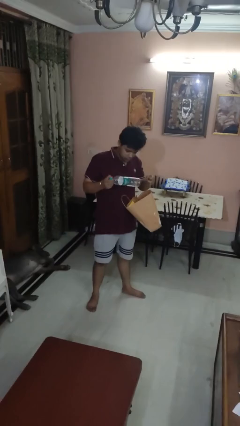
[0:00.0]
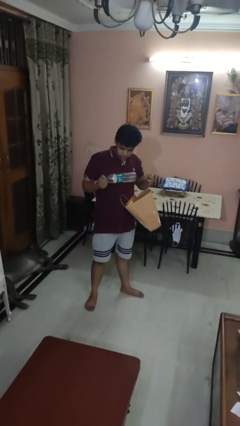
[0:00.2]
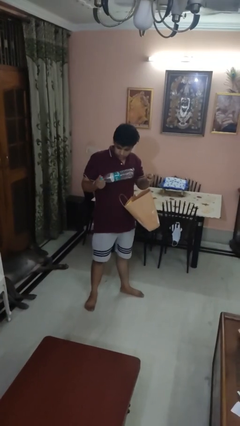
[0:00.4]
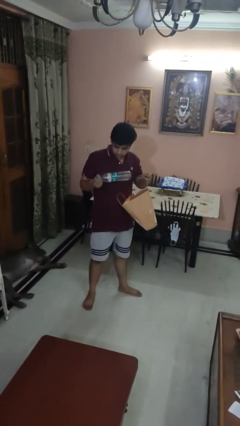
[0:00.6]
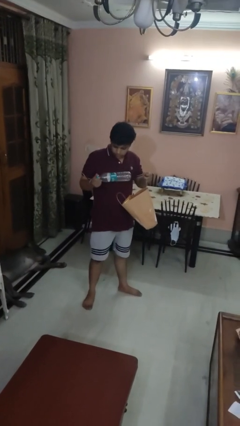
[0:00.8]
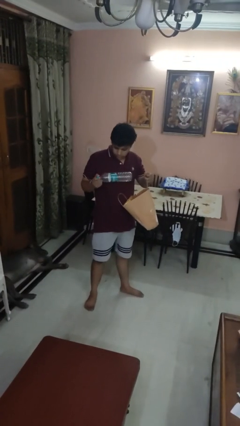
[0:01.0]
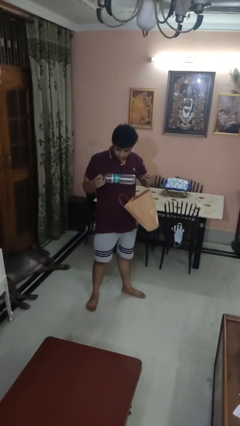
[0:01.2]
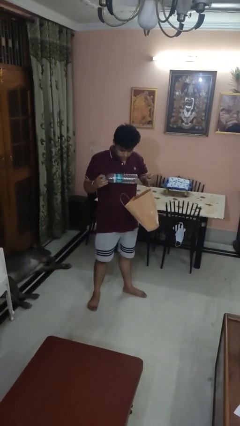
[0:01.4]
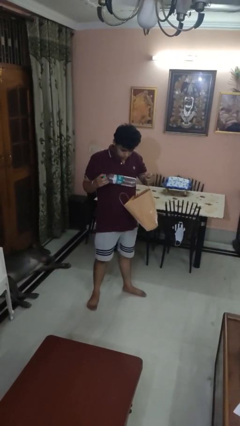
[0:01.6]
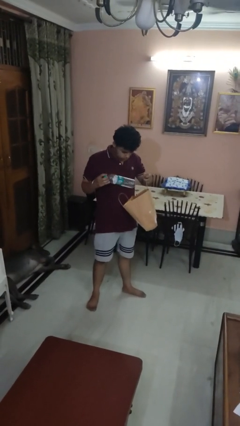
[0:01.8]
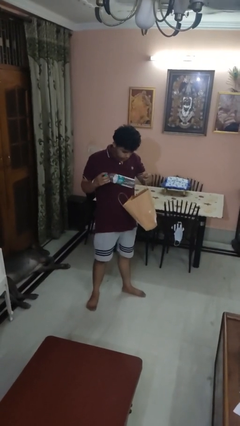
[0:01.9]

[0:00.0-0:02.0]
person takes object from bag

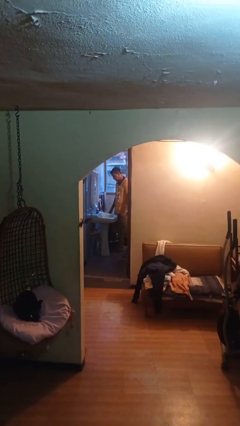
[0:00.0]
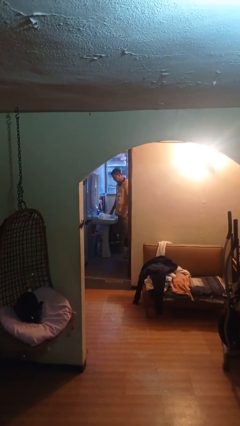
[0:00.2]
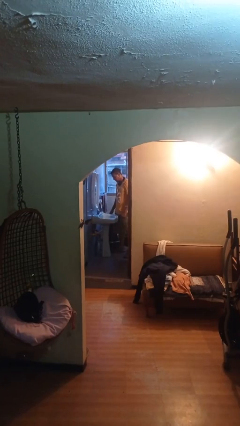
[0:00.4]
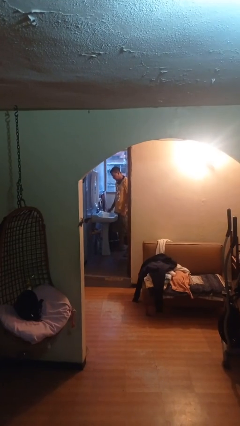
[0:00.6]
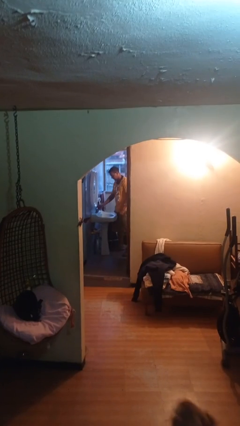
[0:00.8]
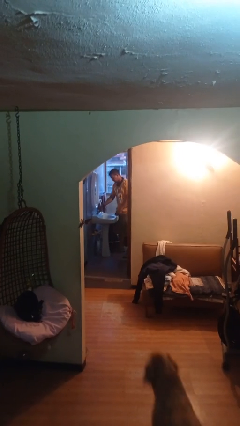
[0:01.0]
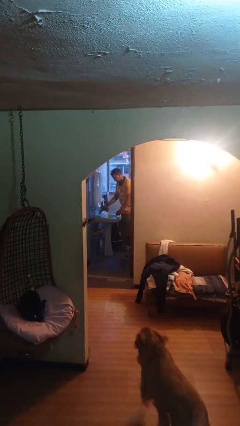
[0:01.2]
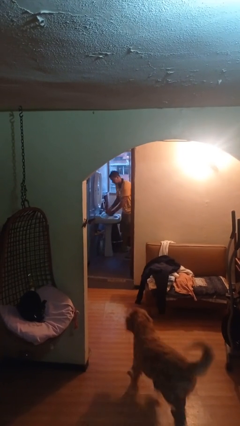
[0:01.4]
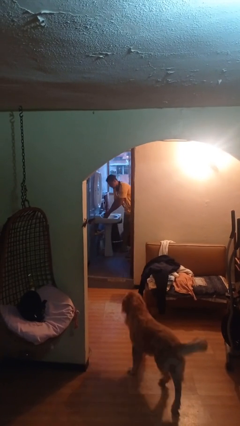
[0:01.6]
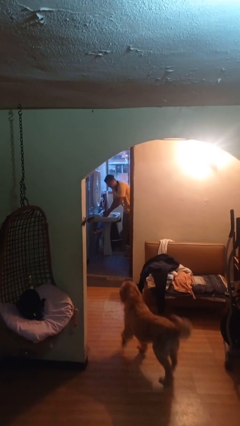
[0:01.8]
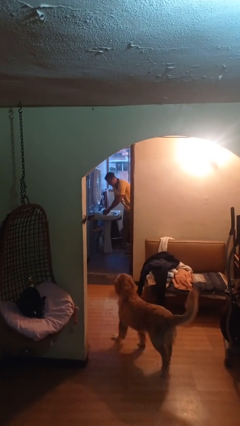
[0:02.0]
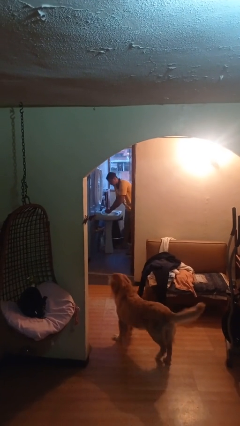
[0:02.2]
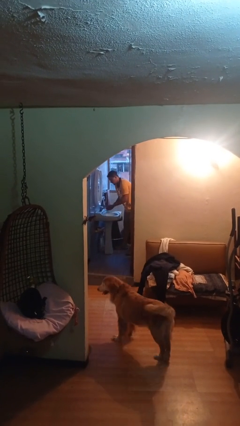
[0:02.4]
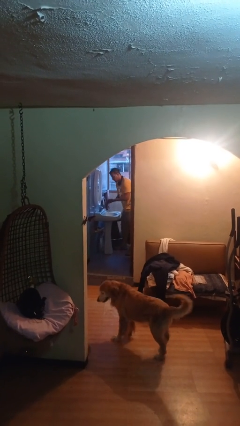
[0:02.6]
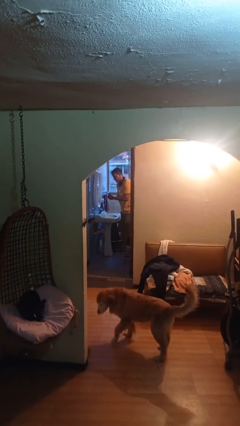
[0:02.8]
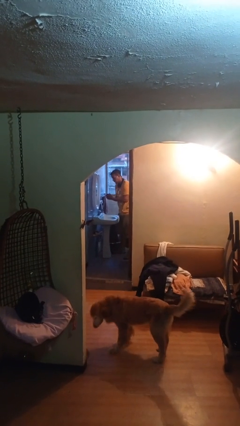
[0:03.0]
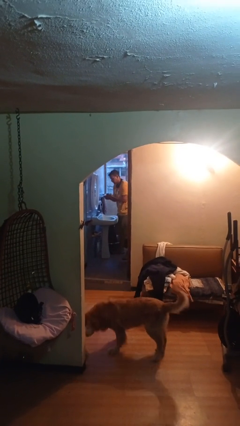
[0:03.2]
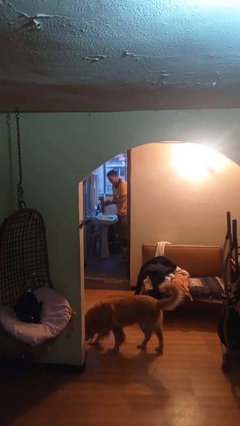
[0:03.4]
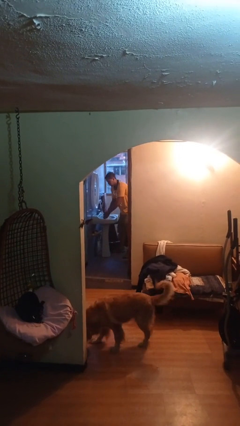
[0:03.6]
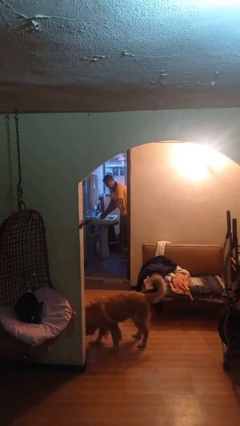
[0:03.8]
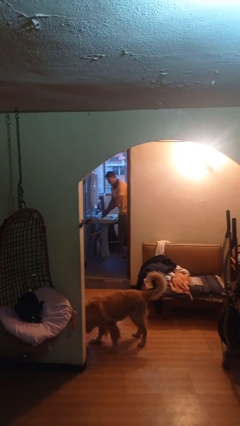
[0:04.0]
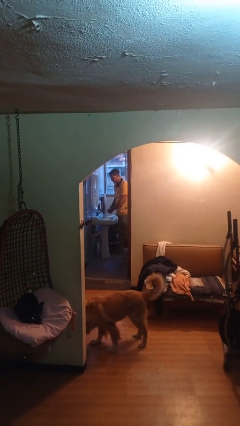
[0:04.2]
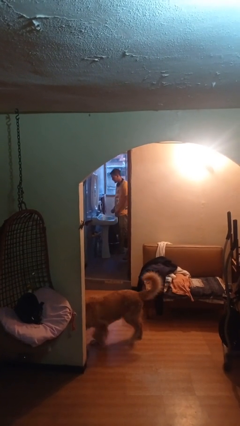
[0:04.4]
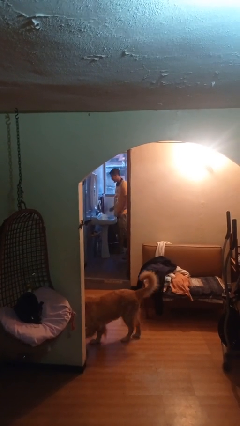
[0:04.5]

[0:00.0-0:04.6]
person washes hands

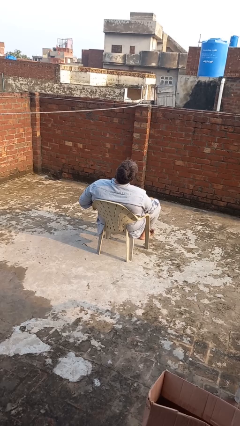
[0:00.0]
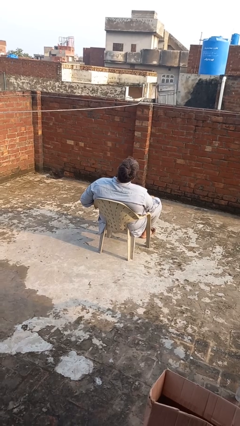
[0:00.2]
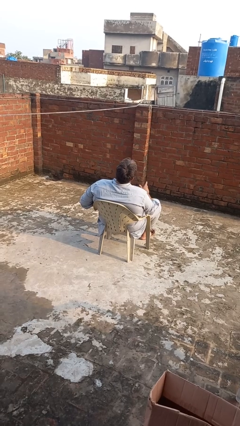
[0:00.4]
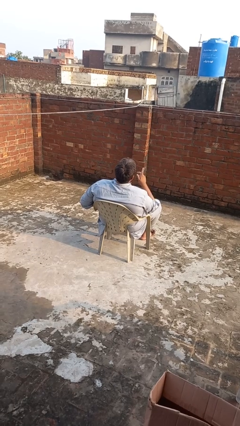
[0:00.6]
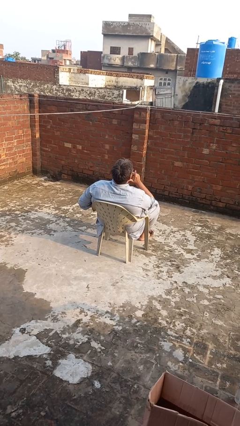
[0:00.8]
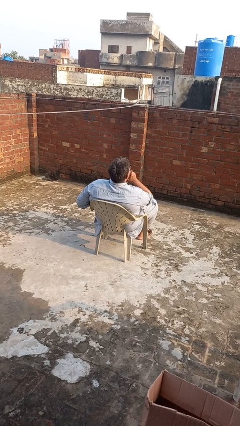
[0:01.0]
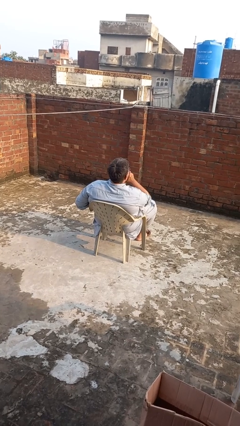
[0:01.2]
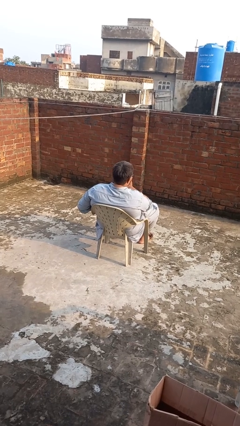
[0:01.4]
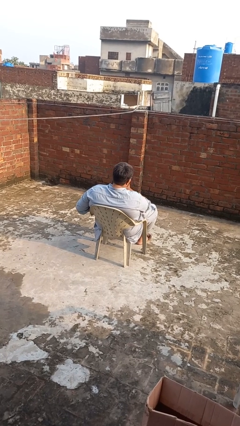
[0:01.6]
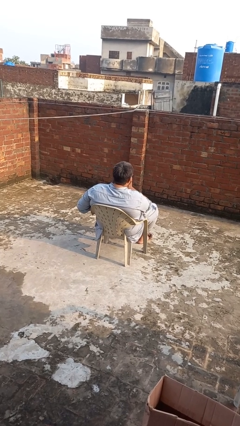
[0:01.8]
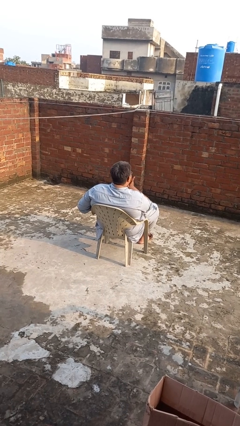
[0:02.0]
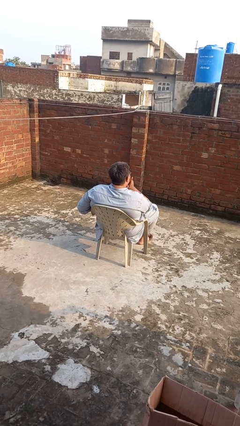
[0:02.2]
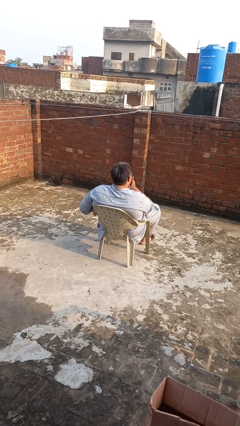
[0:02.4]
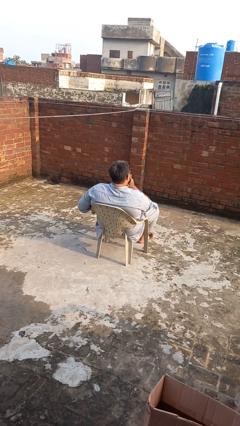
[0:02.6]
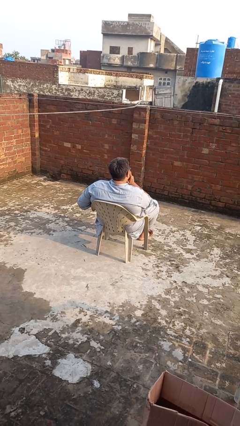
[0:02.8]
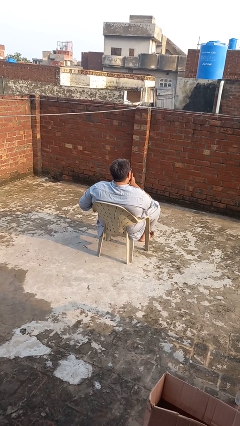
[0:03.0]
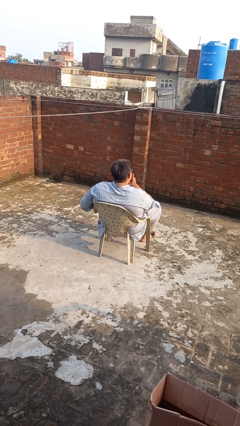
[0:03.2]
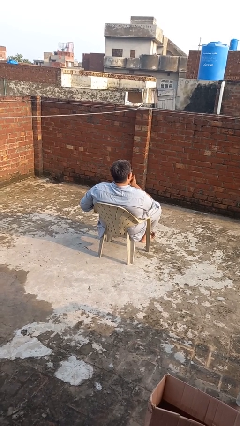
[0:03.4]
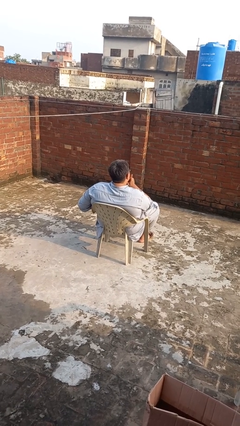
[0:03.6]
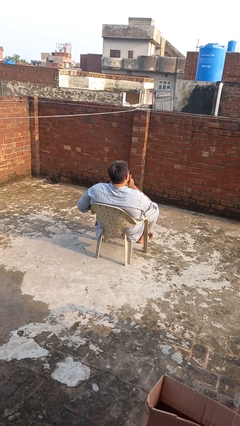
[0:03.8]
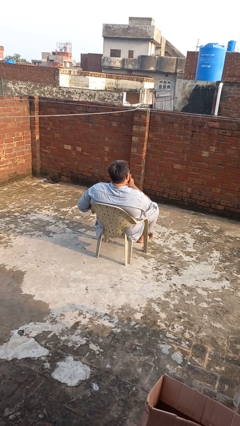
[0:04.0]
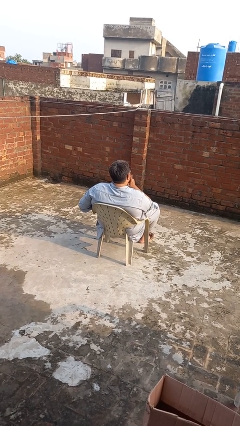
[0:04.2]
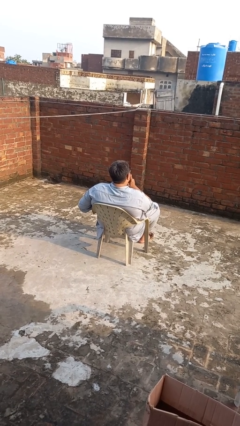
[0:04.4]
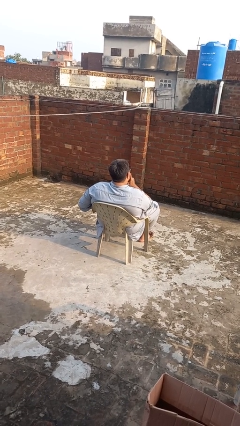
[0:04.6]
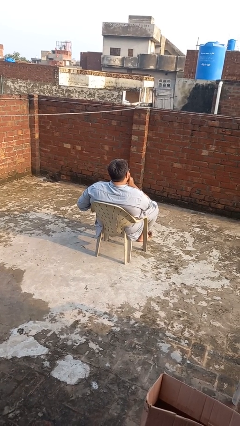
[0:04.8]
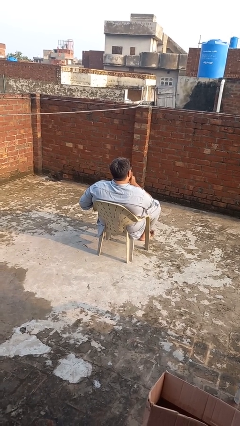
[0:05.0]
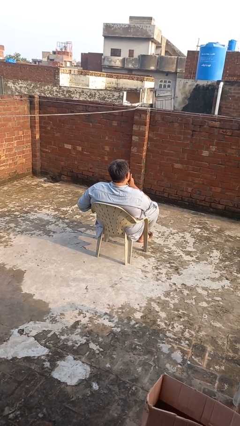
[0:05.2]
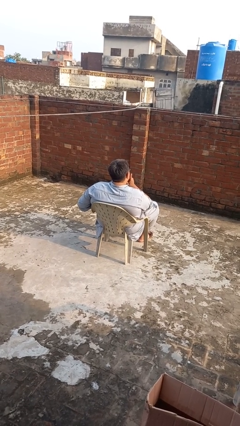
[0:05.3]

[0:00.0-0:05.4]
person strokes chin

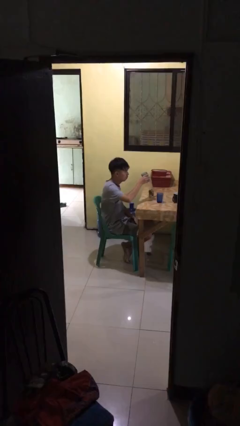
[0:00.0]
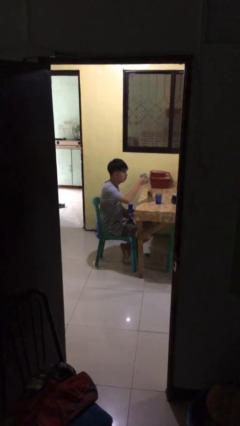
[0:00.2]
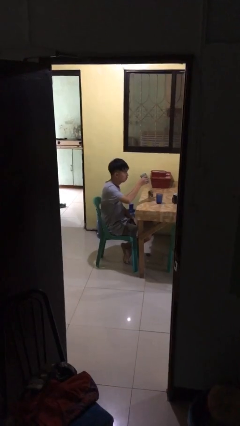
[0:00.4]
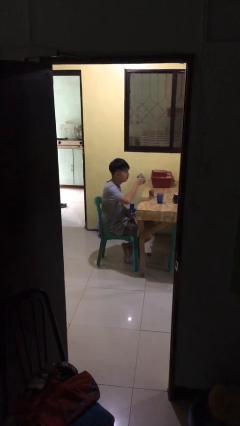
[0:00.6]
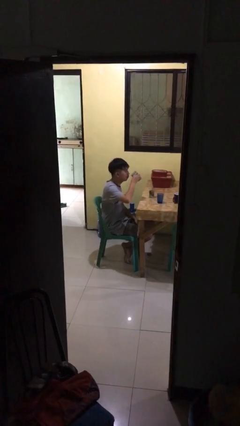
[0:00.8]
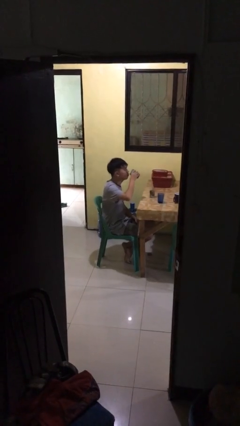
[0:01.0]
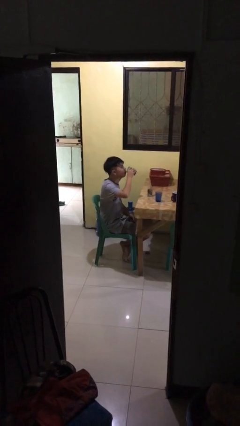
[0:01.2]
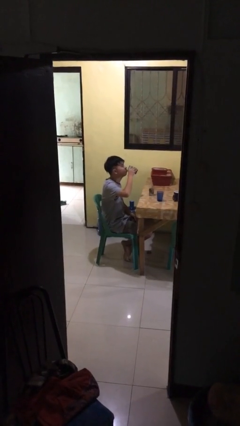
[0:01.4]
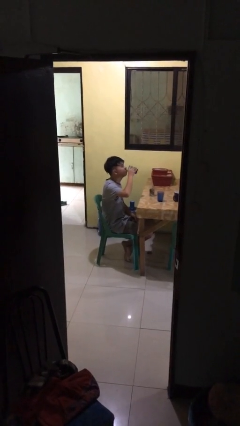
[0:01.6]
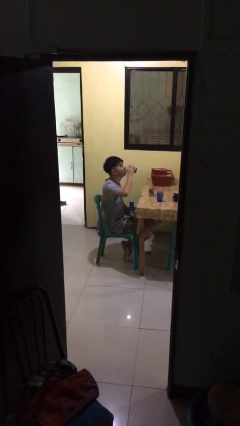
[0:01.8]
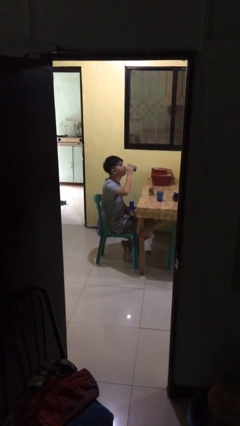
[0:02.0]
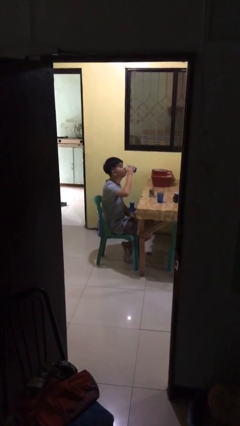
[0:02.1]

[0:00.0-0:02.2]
person drinks from shotglass

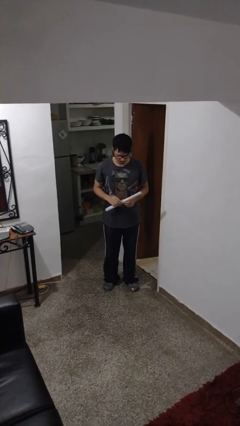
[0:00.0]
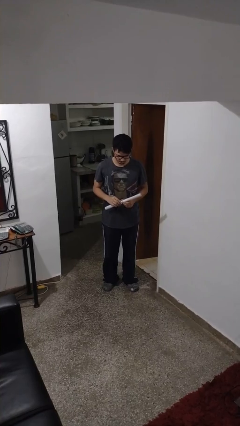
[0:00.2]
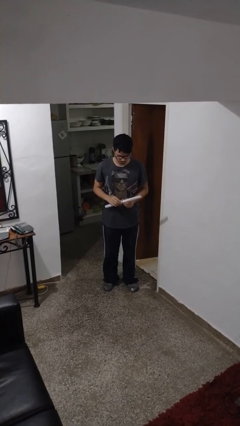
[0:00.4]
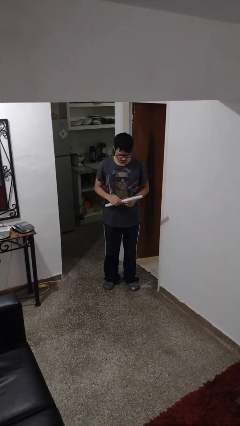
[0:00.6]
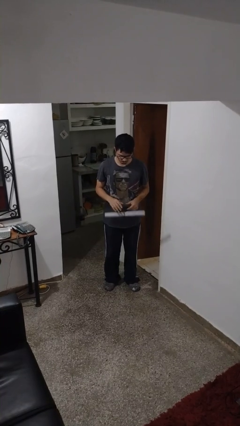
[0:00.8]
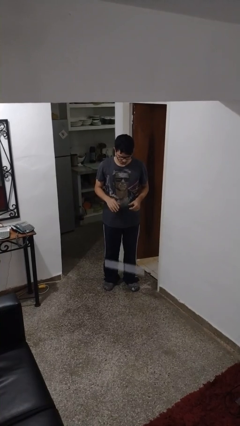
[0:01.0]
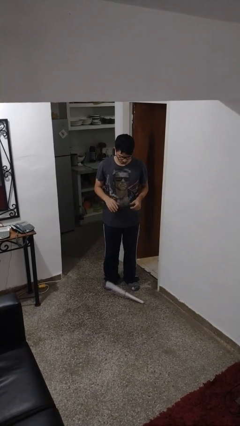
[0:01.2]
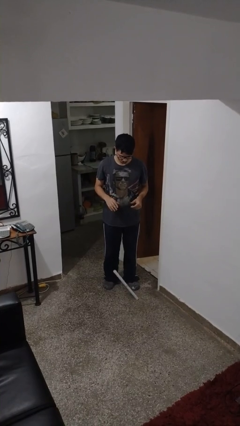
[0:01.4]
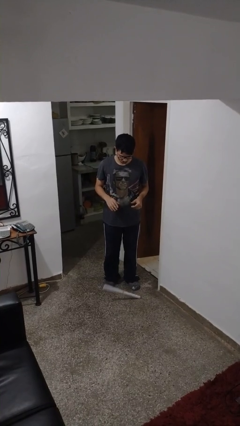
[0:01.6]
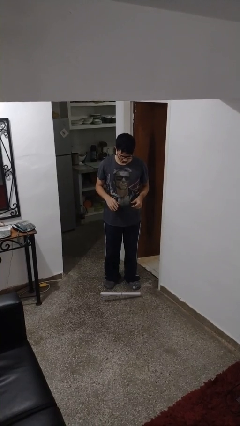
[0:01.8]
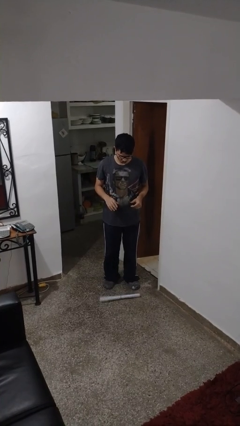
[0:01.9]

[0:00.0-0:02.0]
person drops object

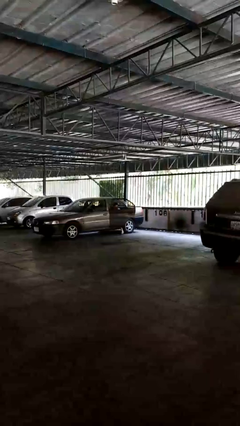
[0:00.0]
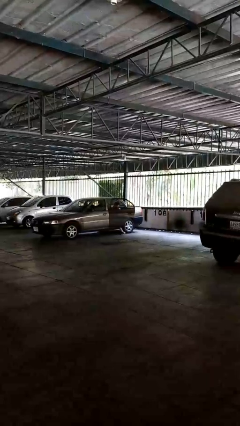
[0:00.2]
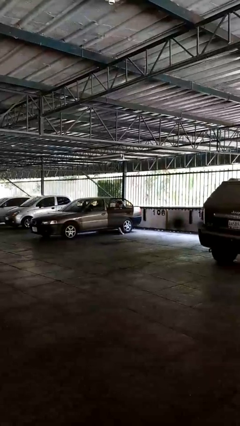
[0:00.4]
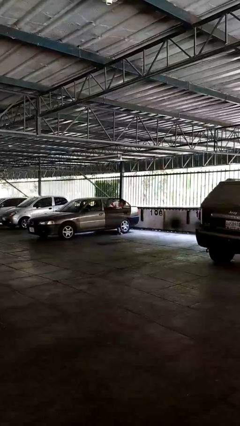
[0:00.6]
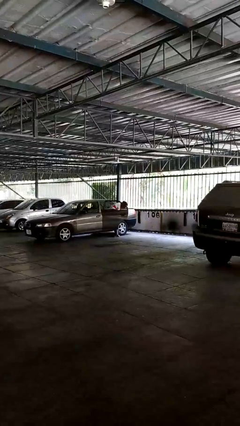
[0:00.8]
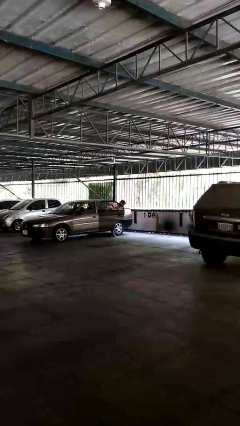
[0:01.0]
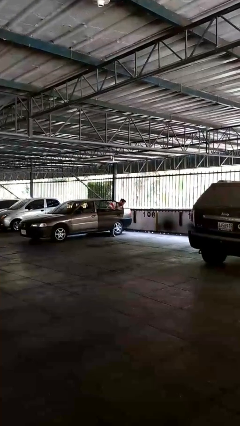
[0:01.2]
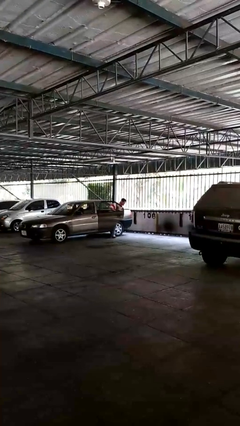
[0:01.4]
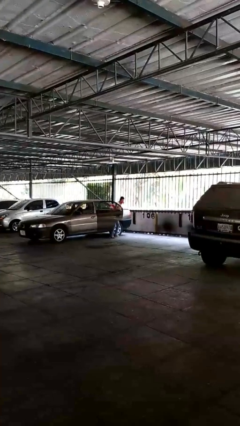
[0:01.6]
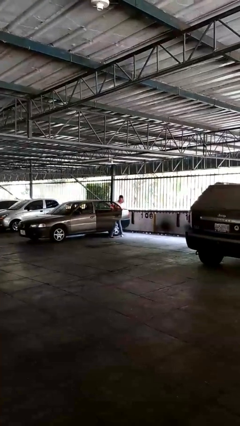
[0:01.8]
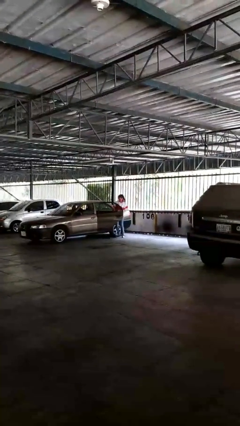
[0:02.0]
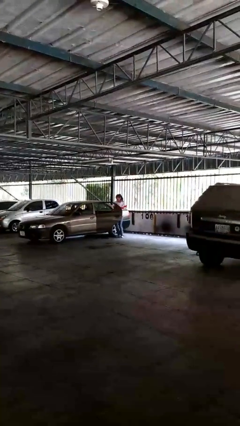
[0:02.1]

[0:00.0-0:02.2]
person exits car
